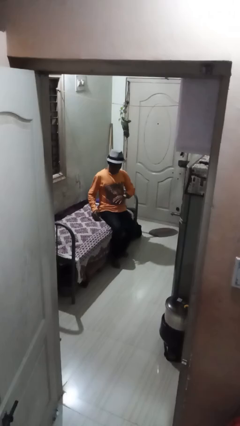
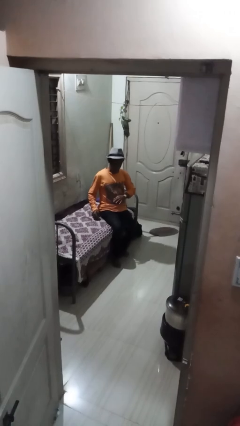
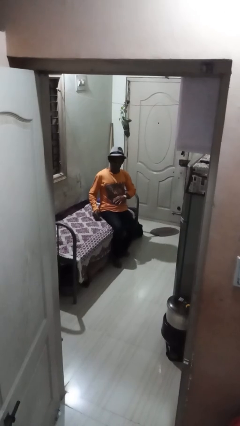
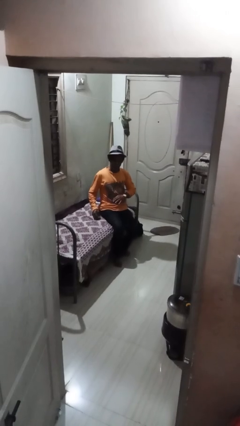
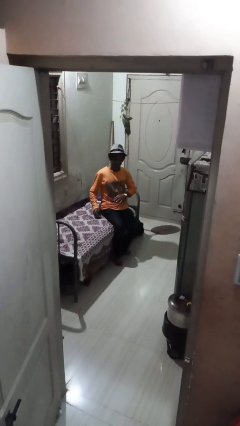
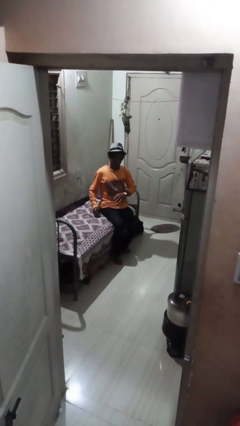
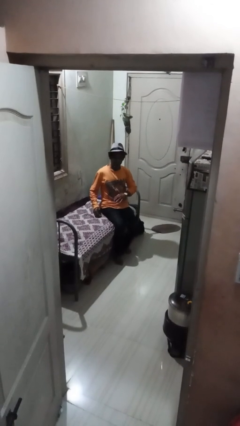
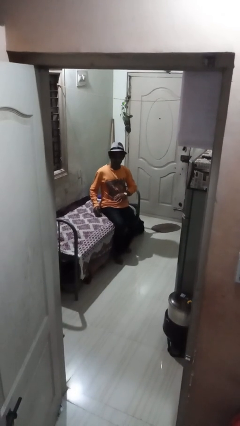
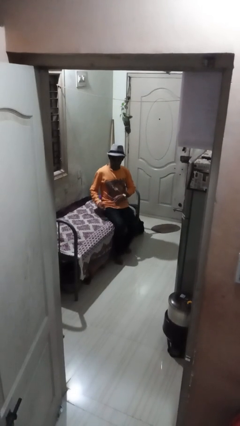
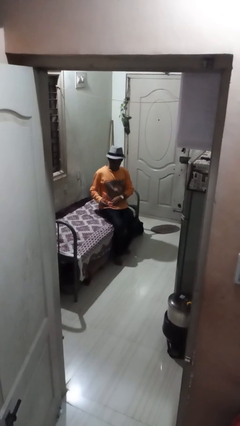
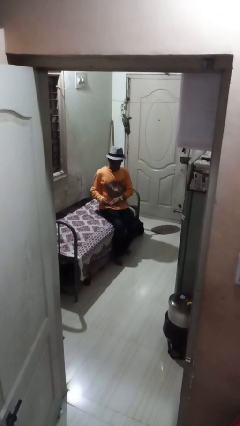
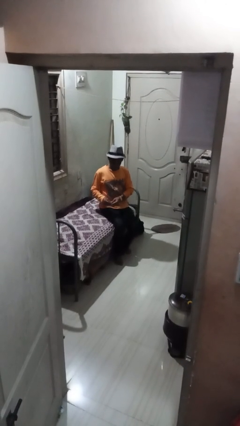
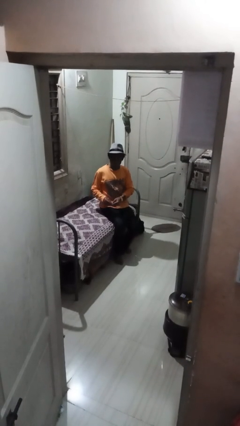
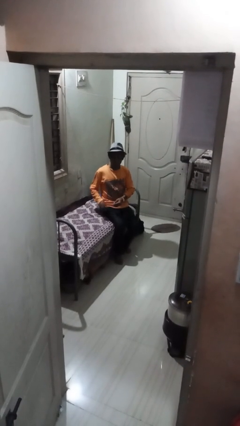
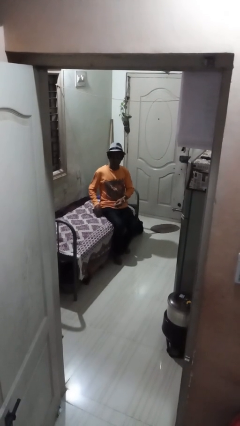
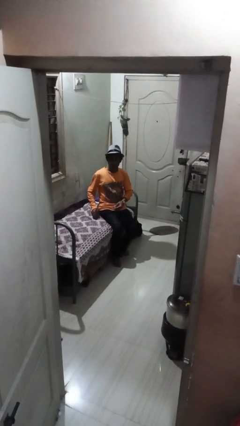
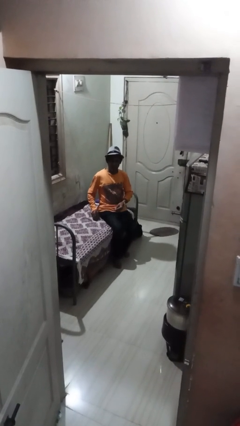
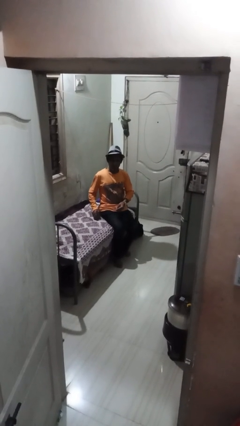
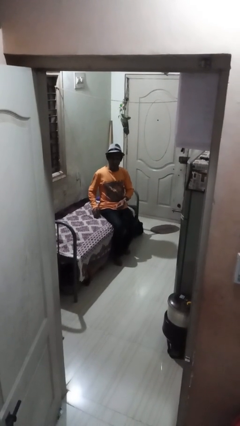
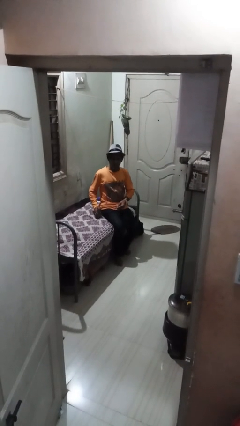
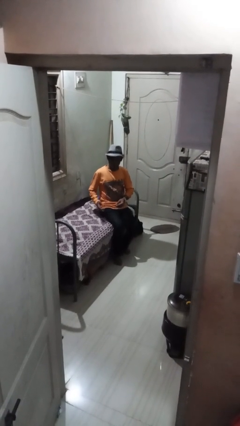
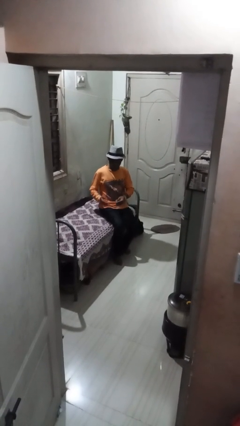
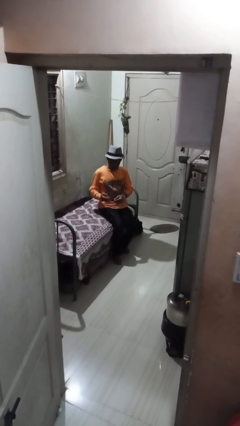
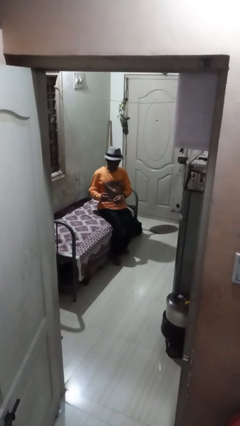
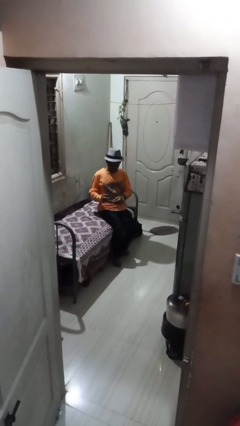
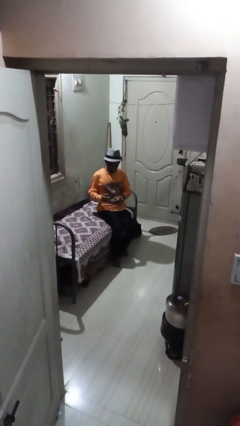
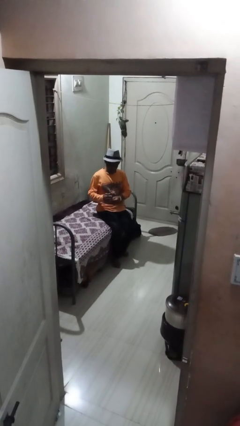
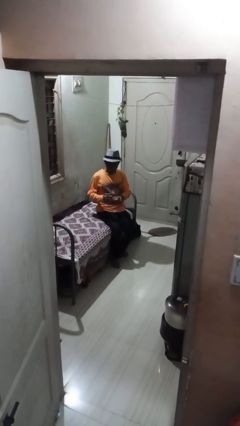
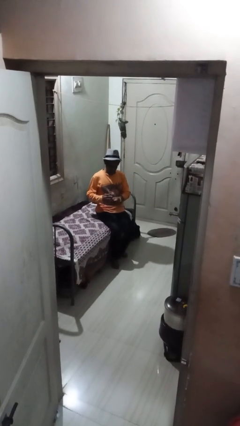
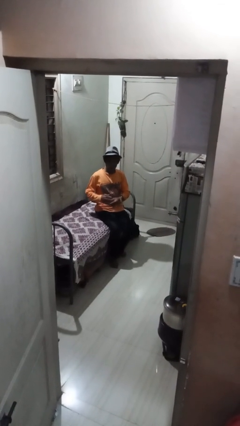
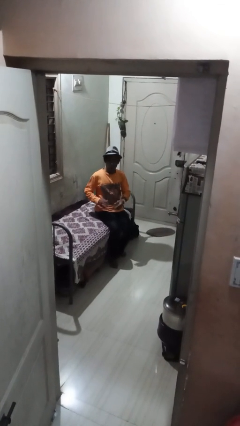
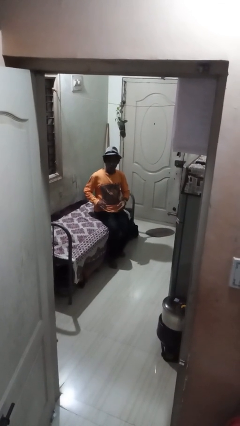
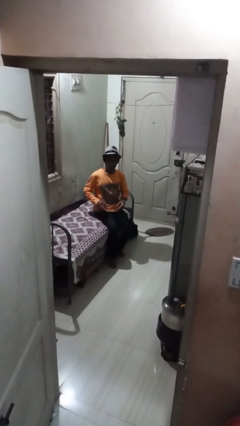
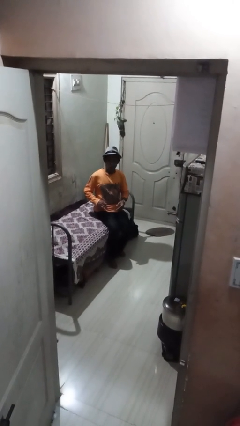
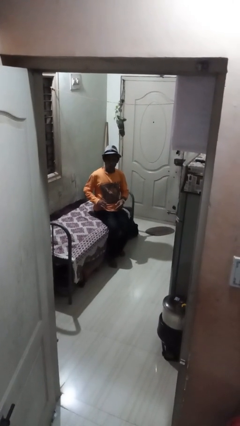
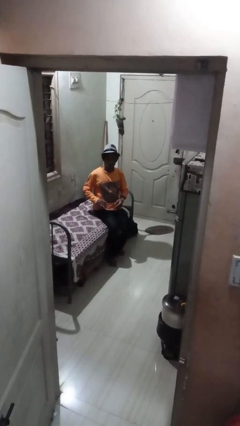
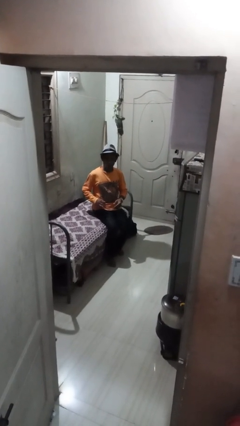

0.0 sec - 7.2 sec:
person puts on ring

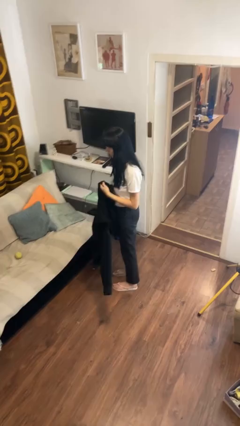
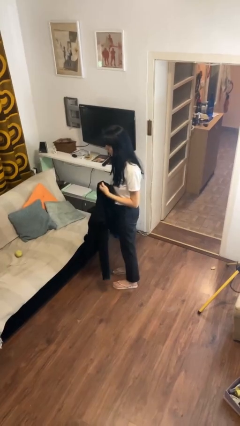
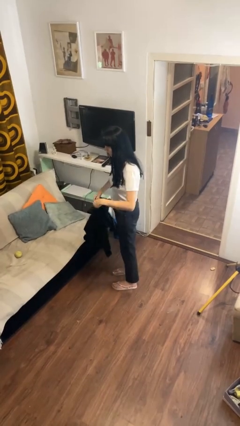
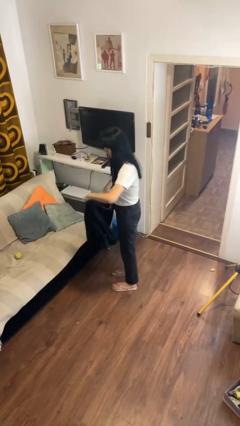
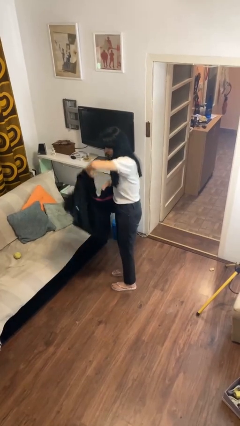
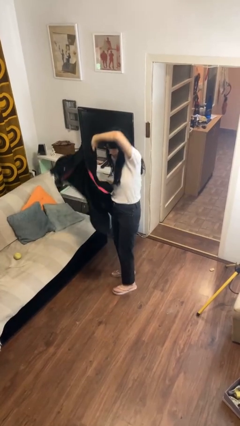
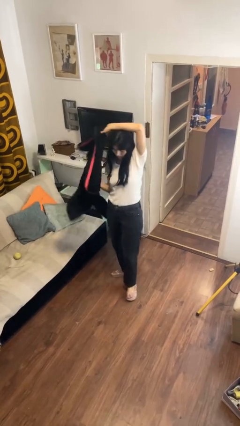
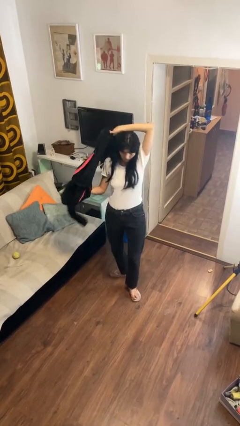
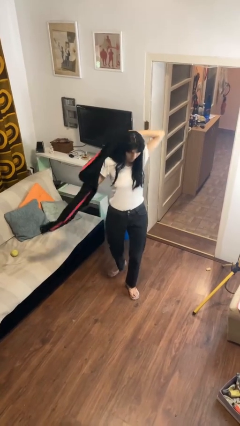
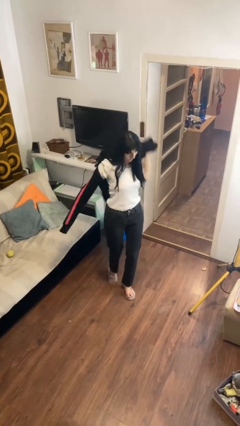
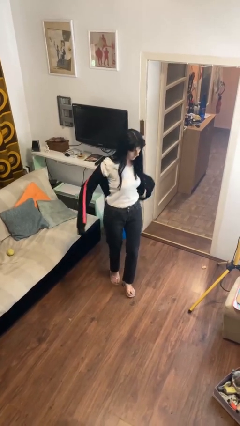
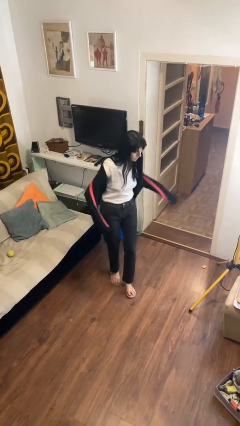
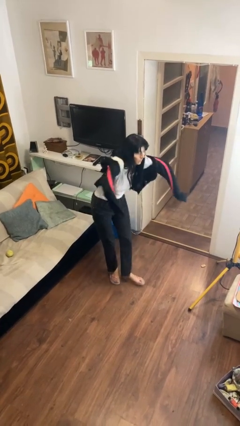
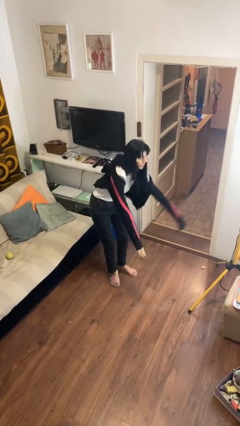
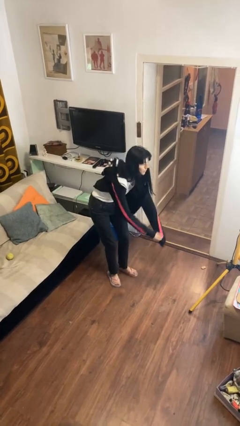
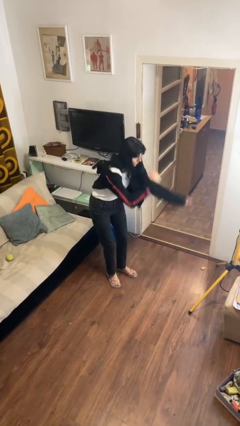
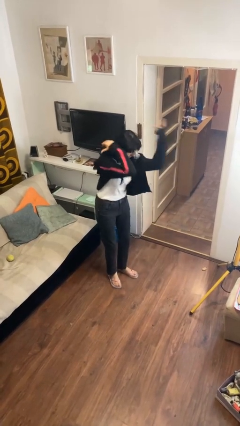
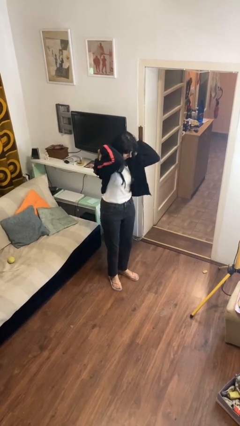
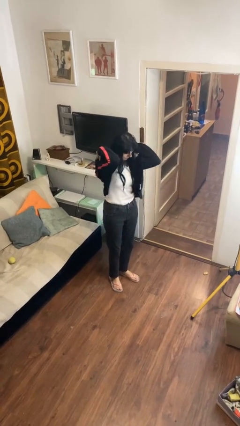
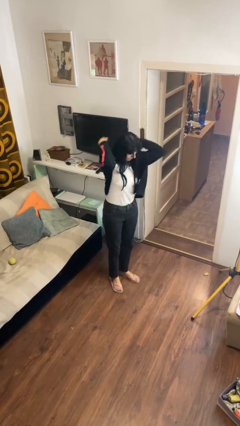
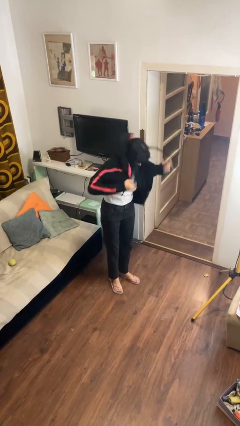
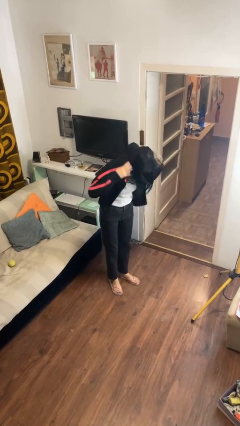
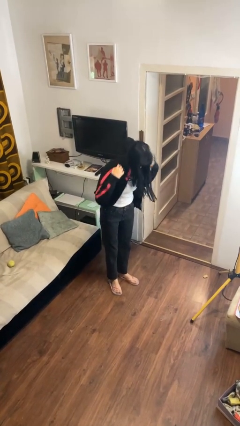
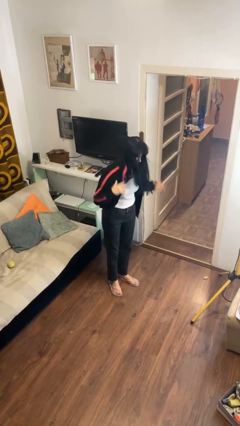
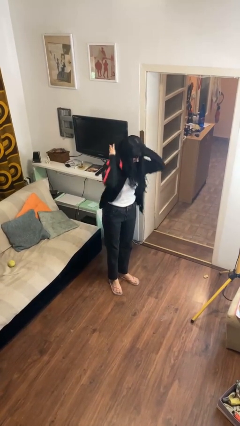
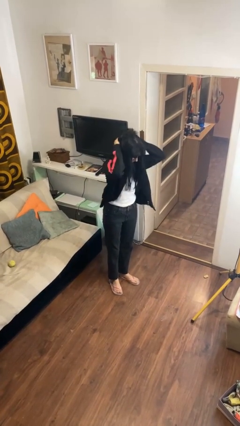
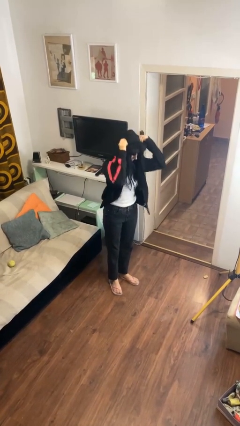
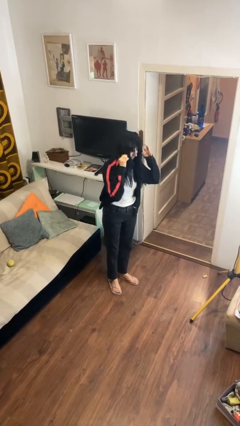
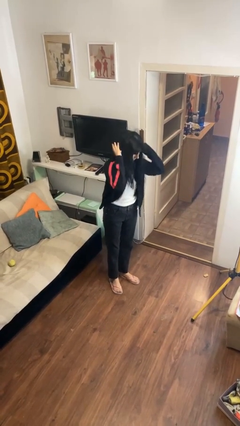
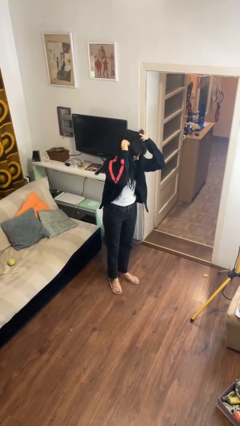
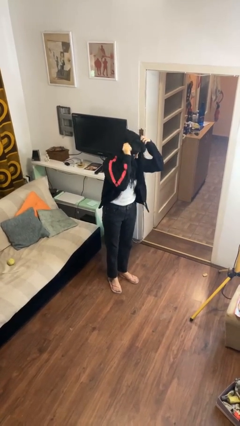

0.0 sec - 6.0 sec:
person puts on hoodie

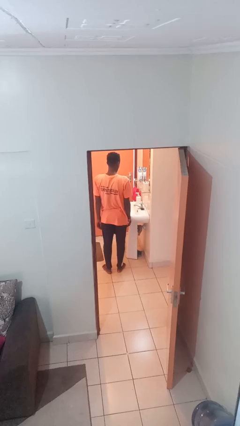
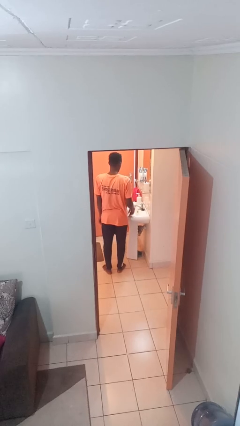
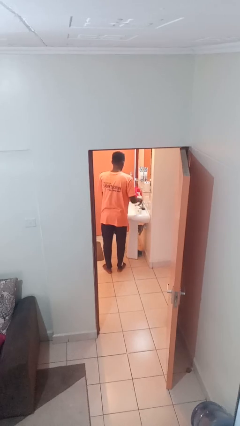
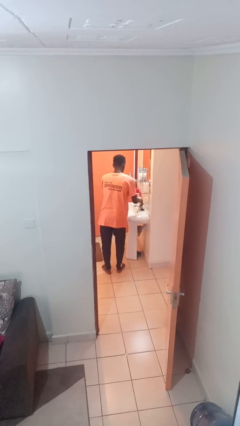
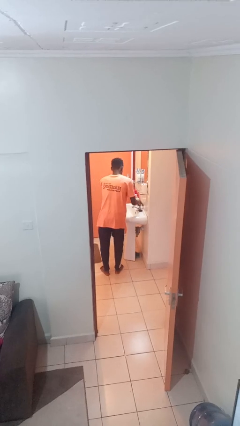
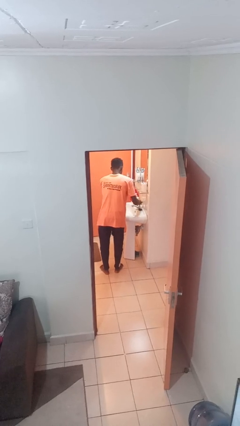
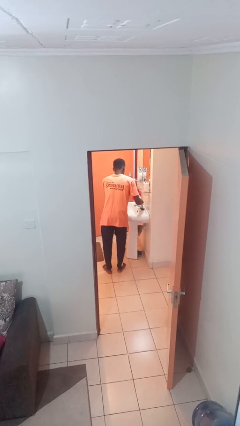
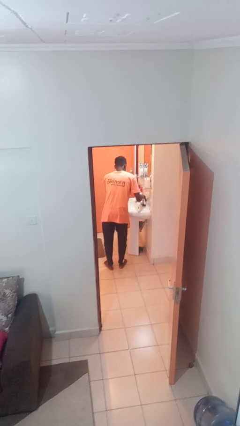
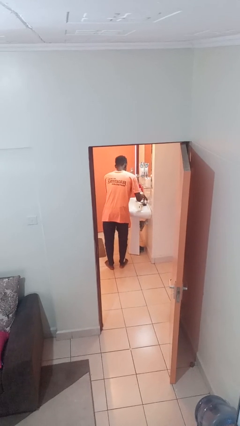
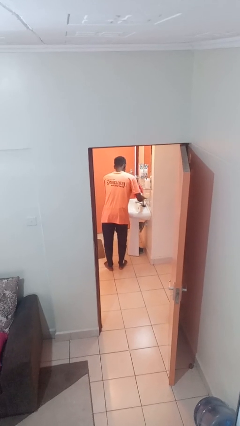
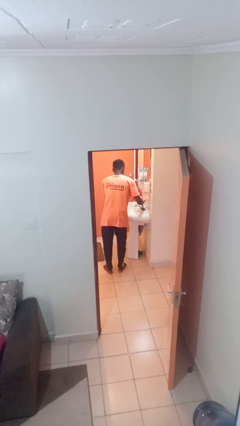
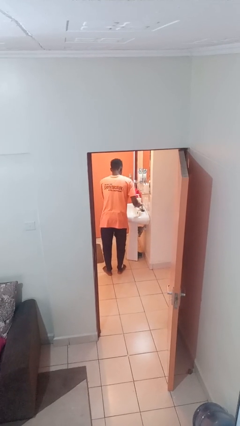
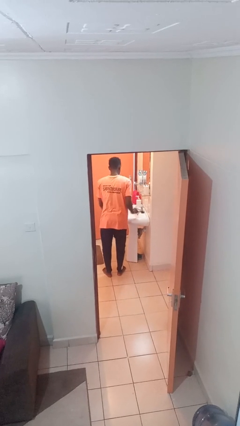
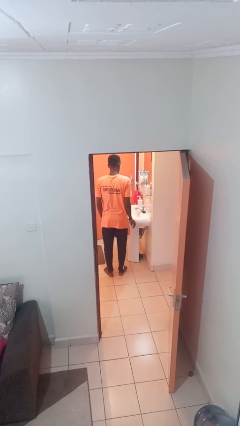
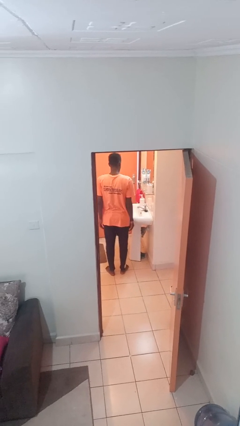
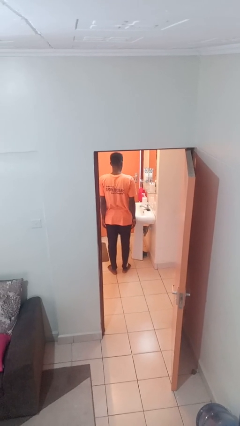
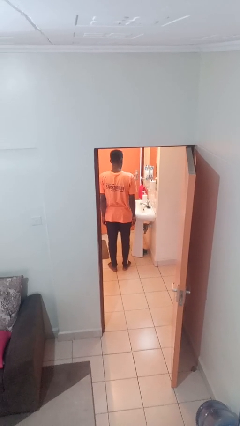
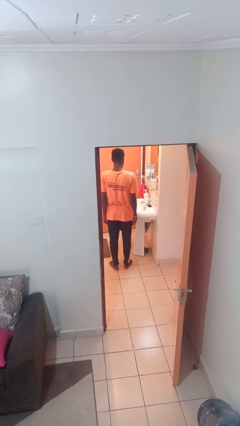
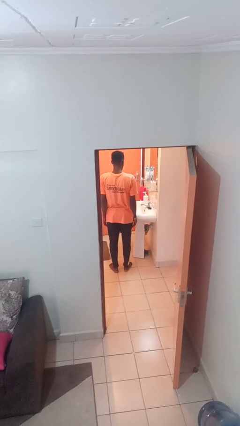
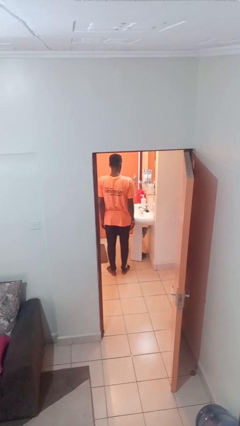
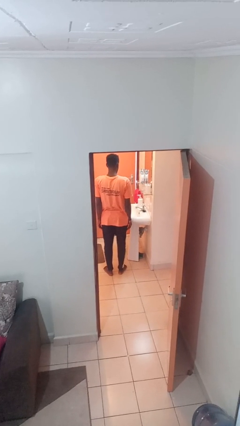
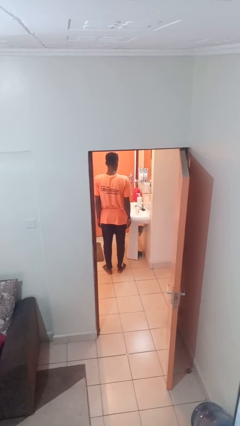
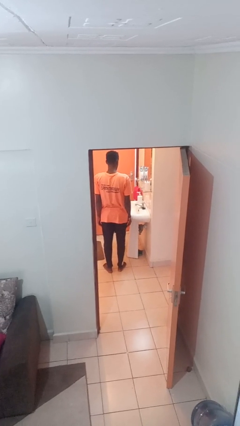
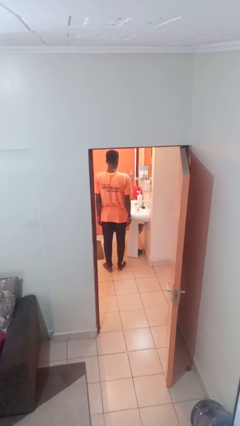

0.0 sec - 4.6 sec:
person turns on faucet

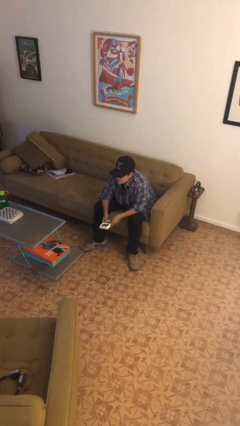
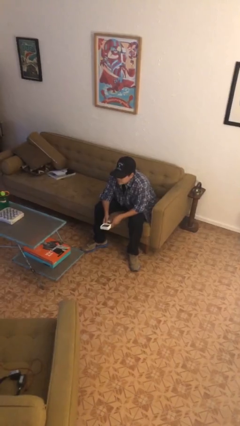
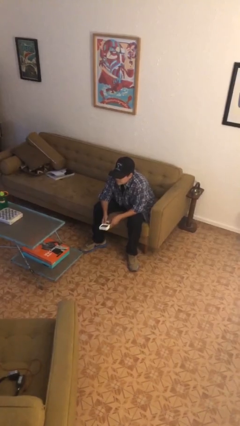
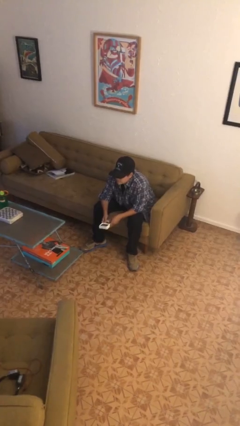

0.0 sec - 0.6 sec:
person interacts with handheld game
